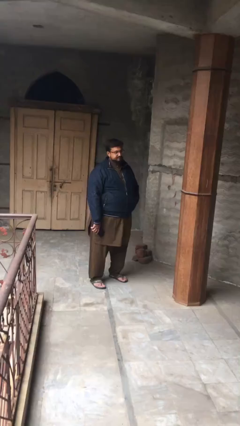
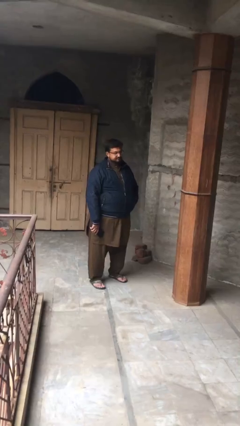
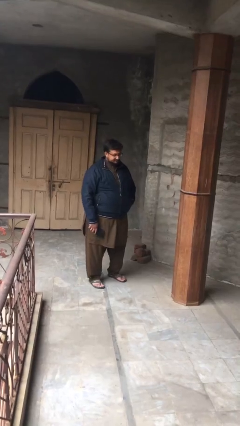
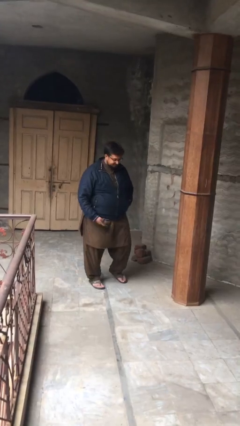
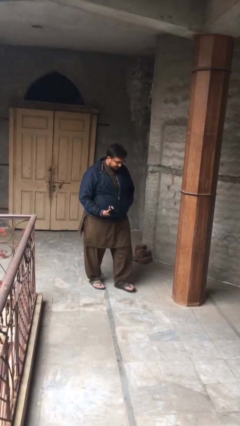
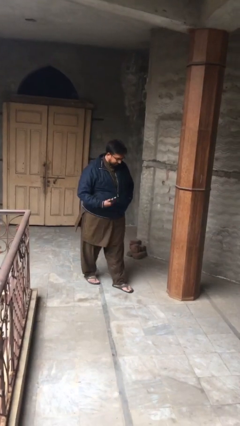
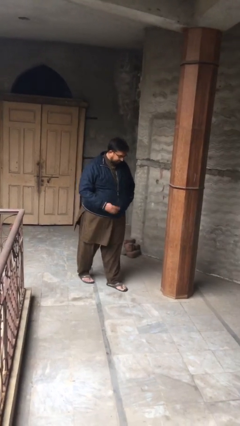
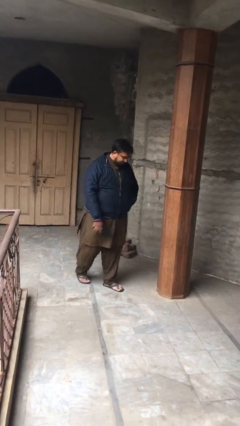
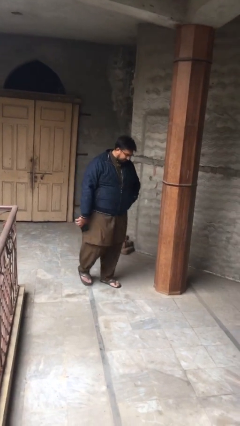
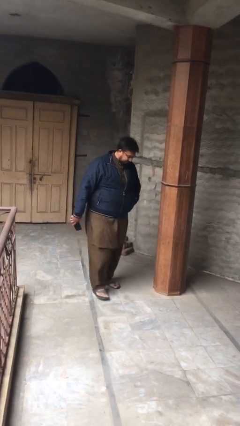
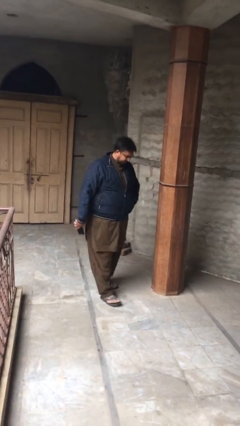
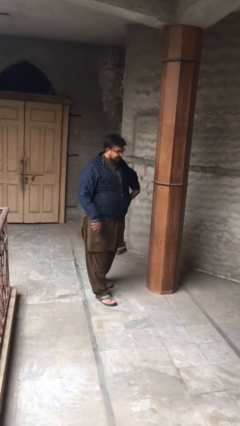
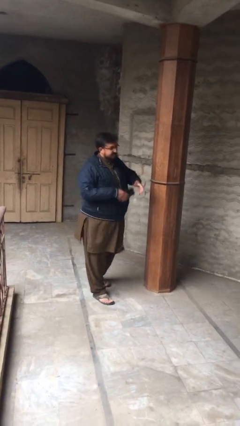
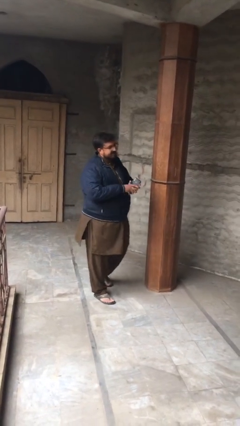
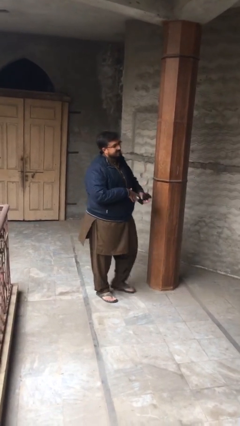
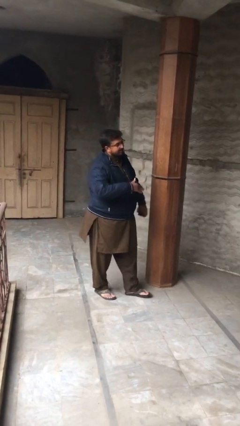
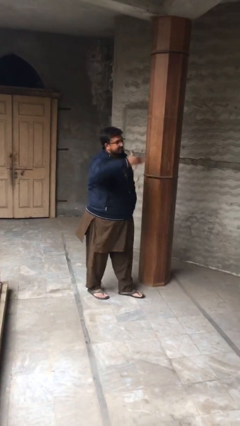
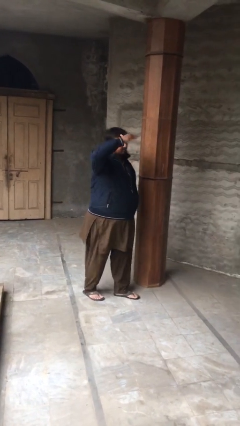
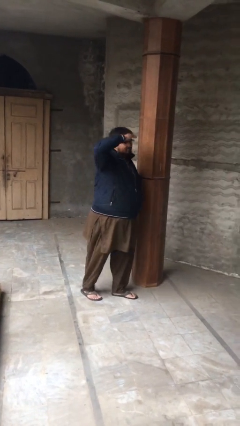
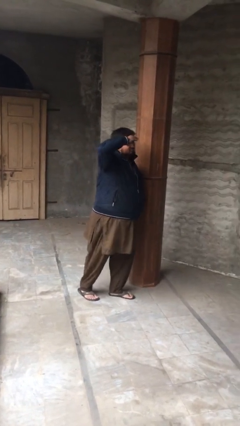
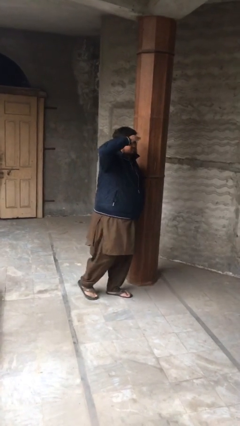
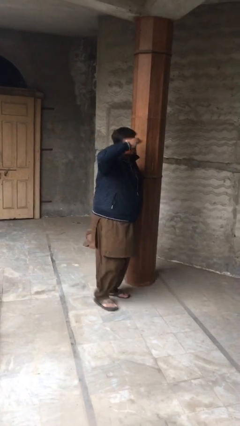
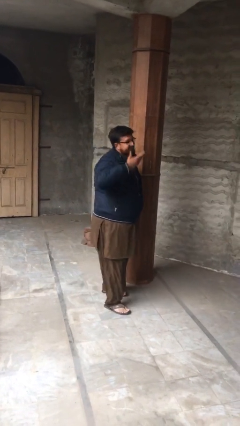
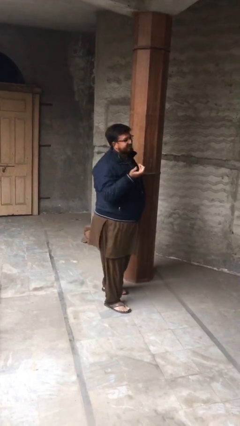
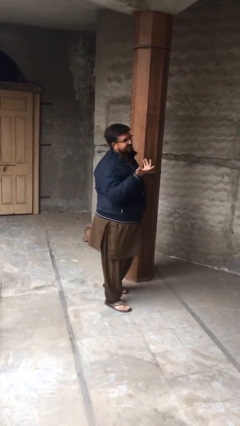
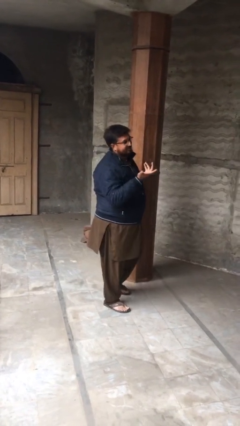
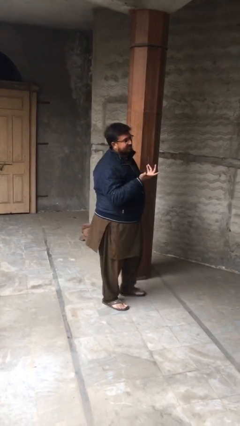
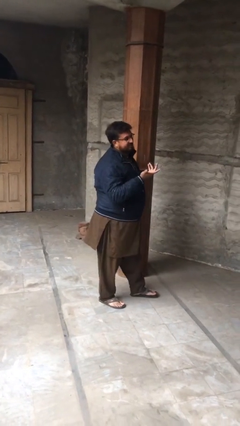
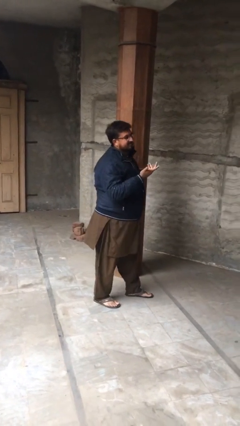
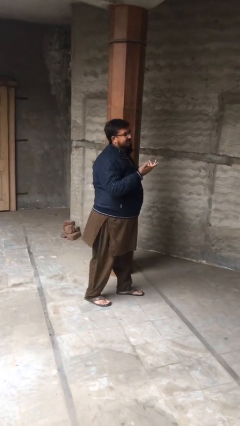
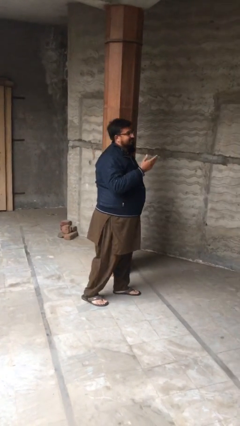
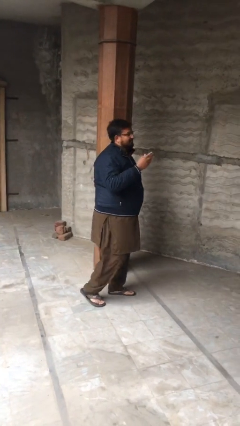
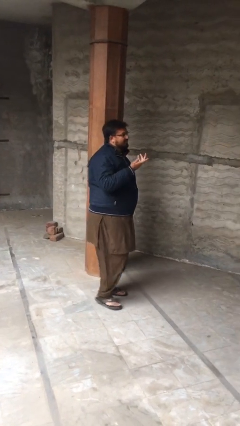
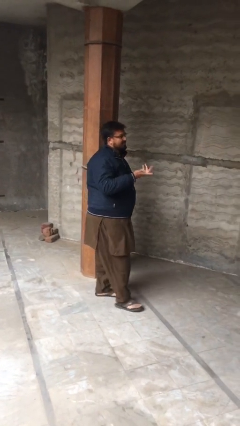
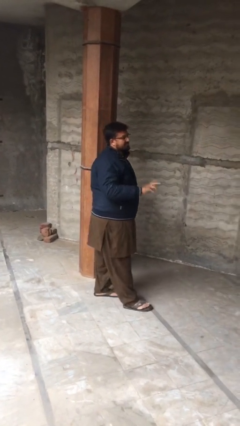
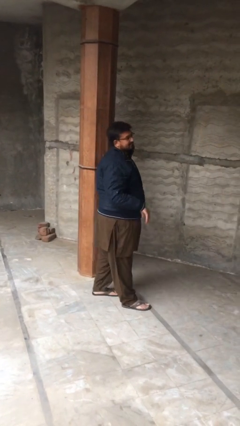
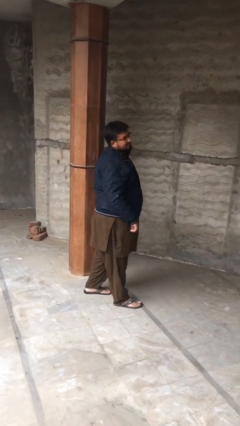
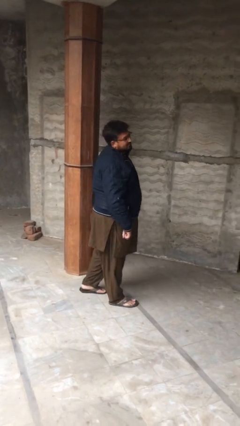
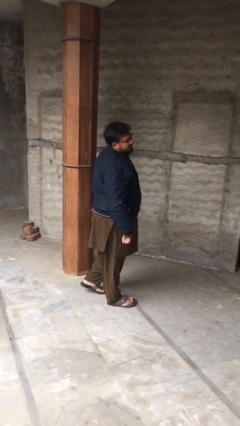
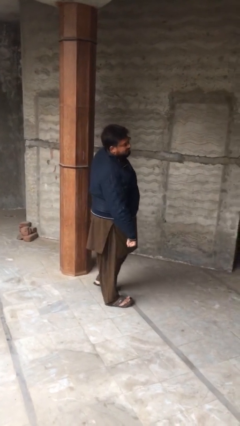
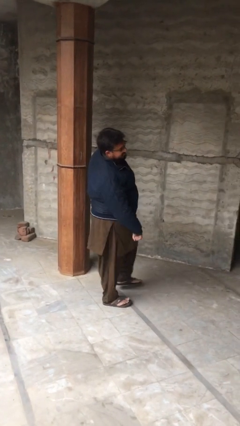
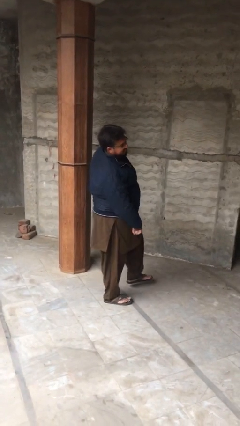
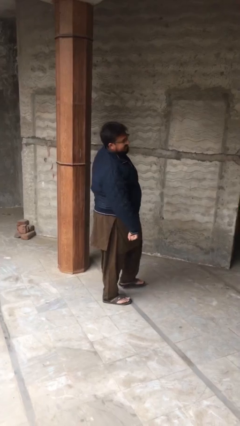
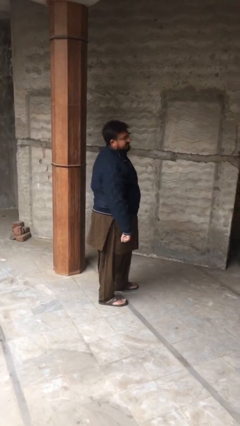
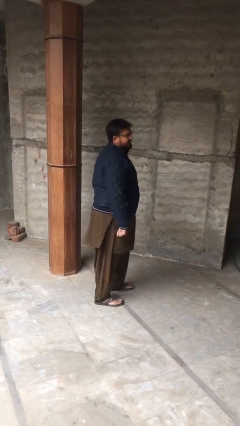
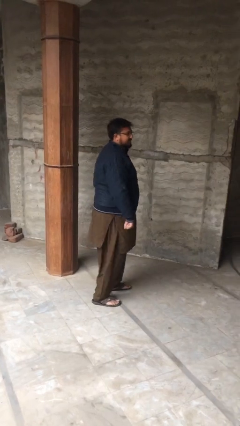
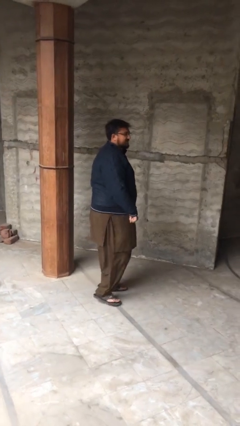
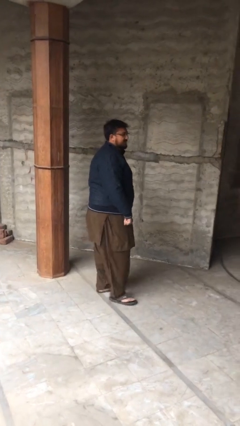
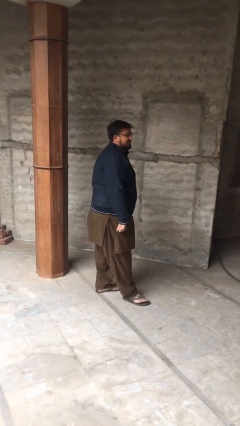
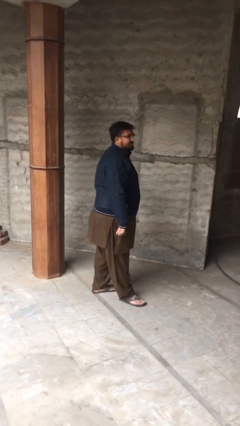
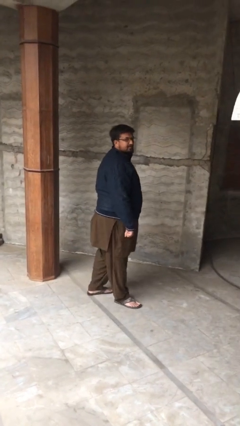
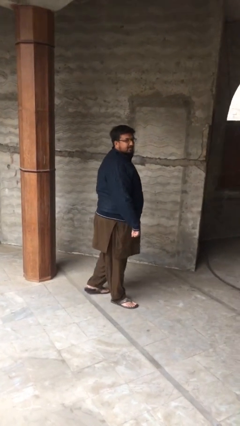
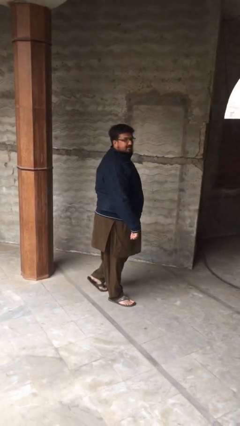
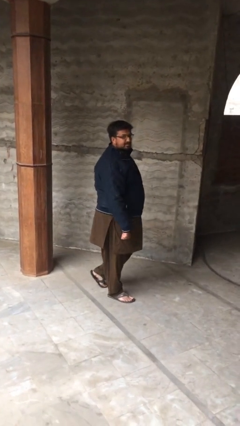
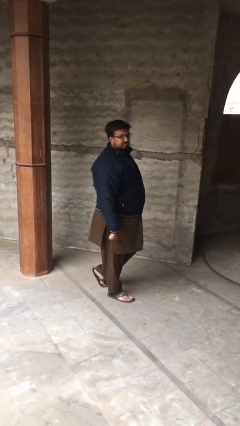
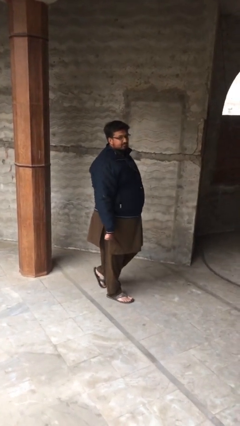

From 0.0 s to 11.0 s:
person walks

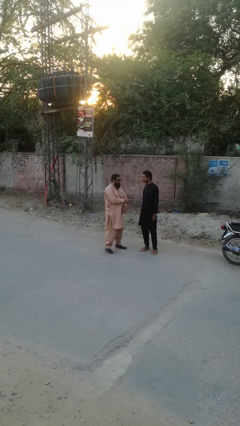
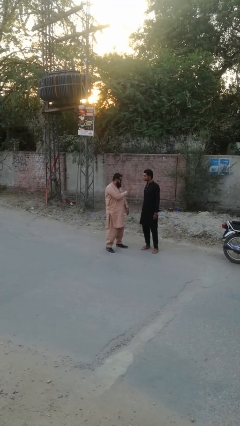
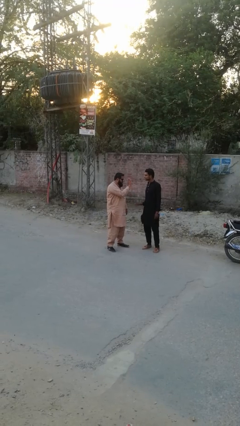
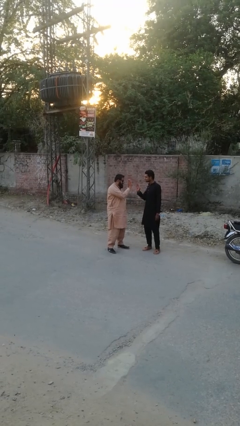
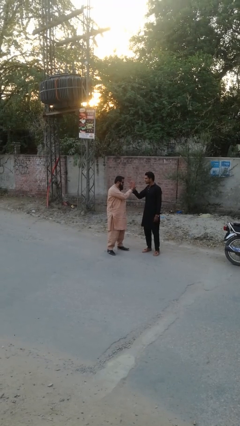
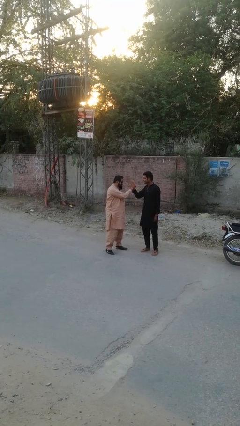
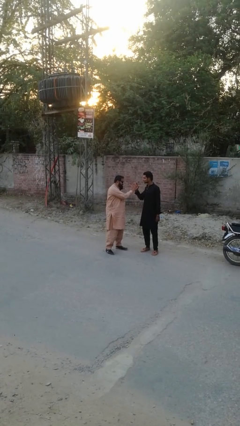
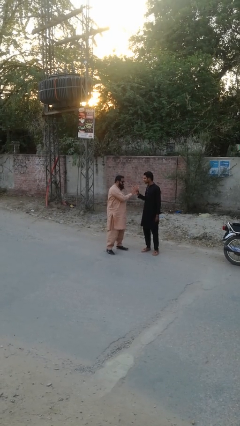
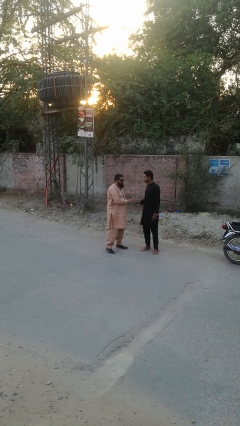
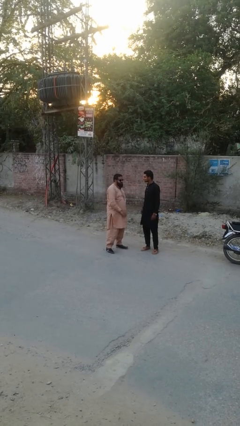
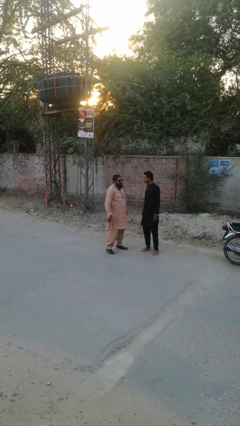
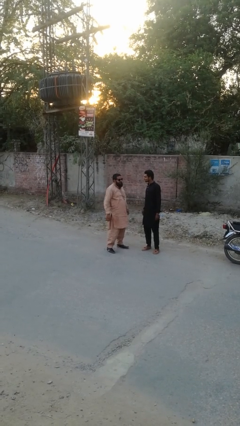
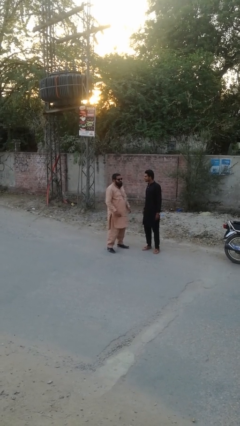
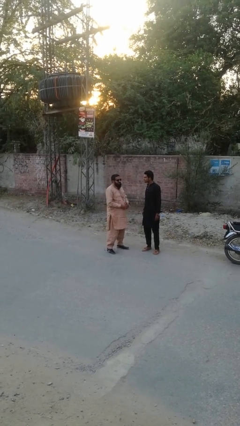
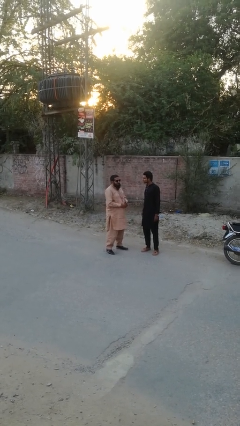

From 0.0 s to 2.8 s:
person highfives hand

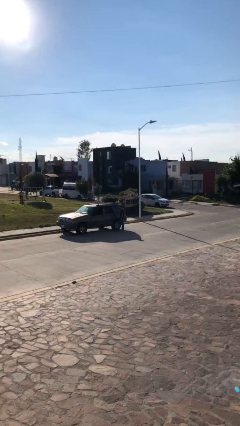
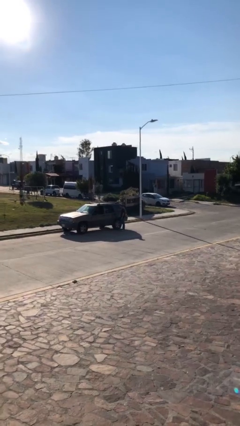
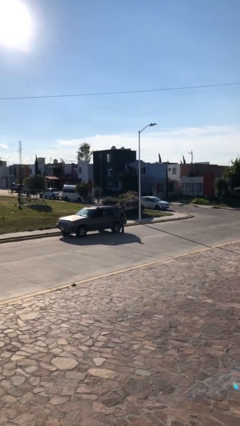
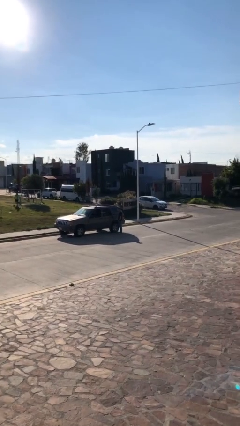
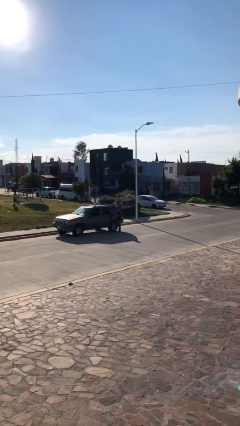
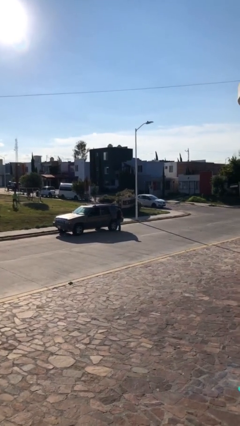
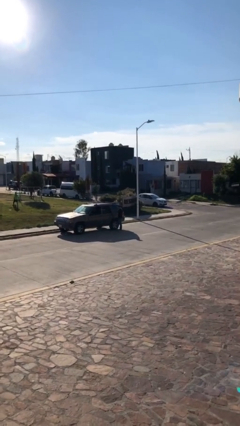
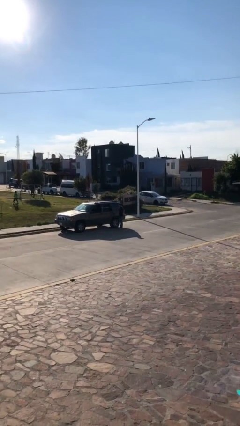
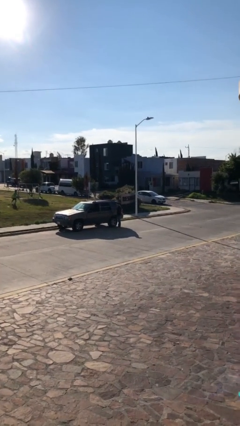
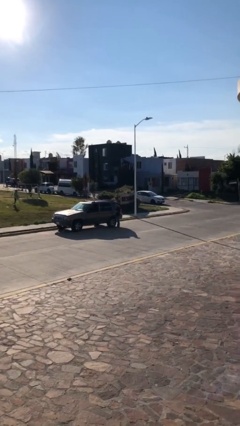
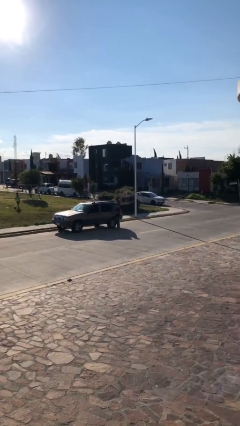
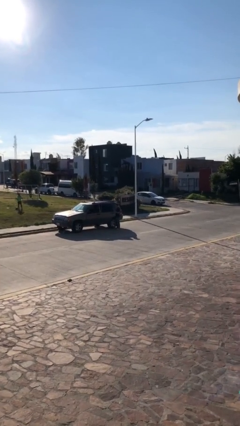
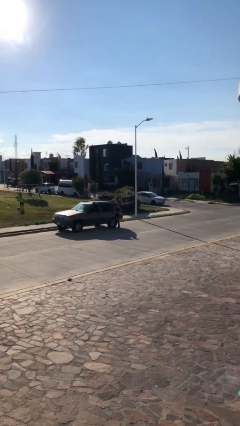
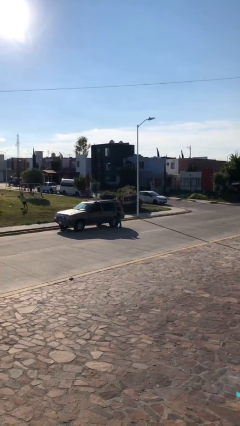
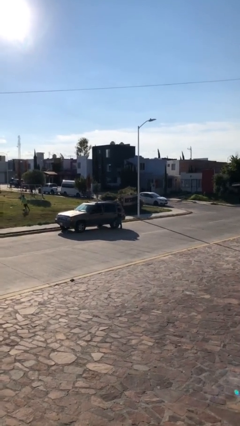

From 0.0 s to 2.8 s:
person opens car door

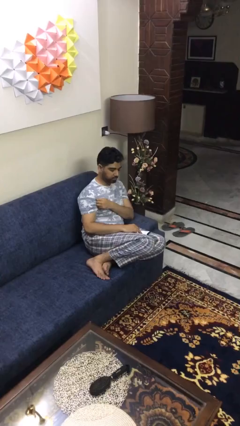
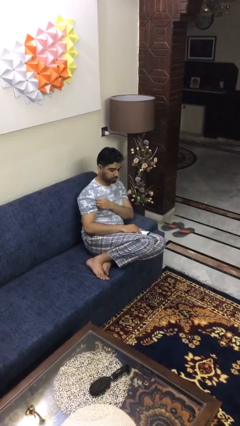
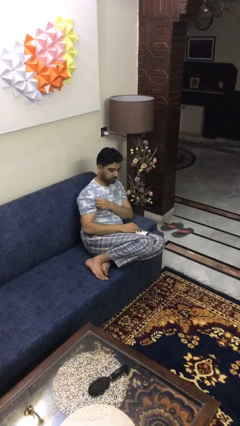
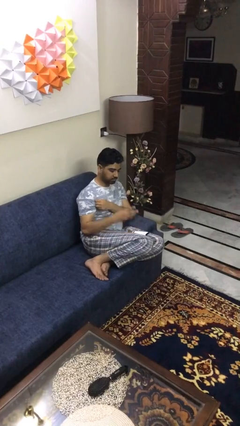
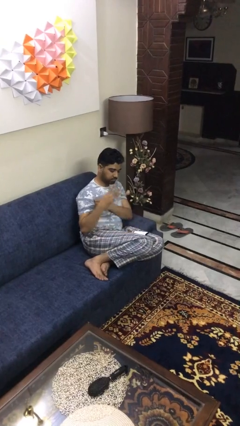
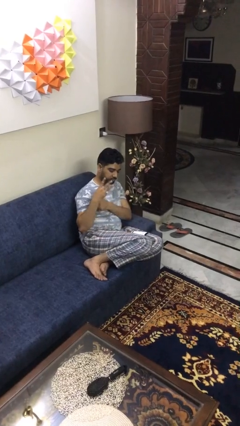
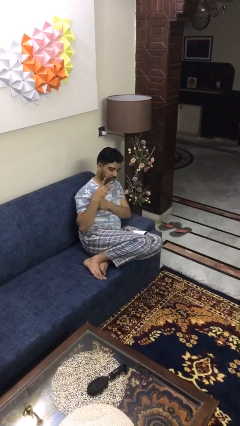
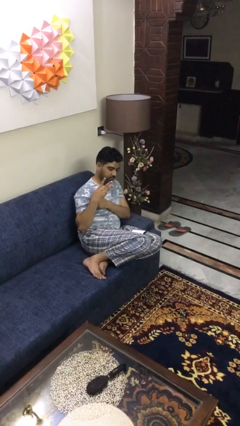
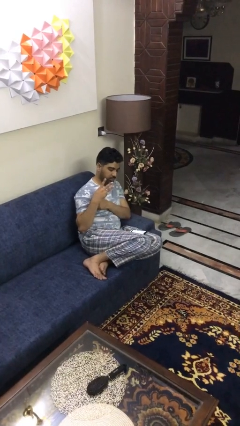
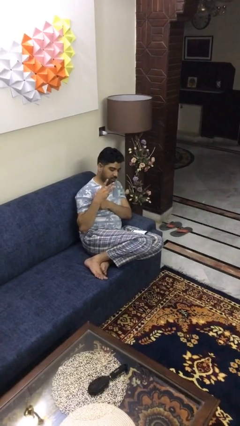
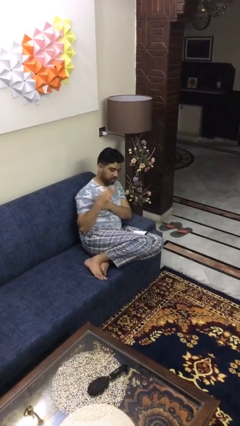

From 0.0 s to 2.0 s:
person gestures number three
